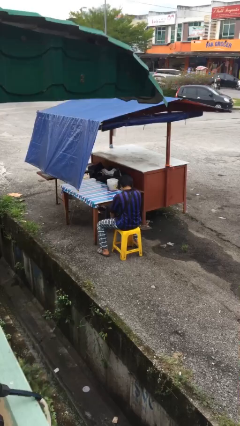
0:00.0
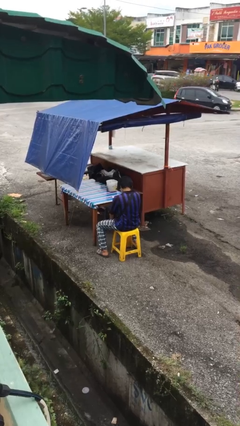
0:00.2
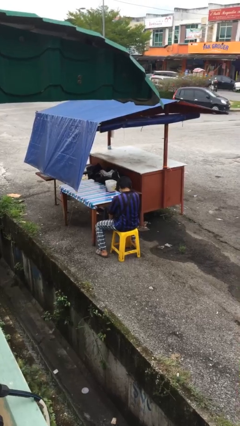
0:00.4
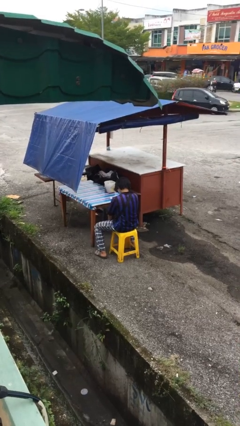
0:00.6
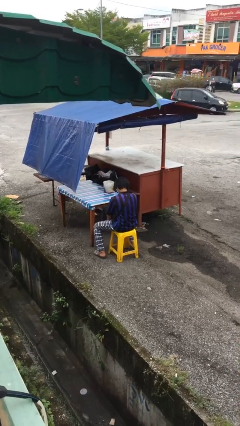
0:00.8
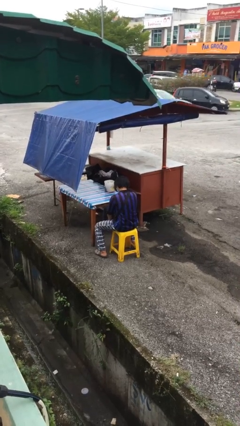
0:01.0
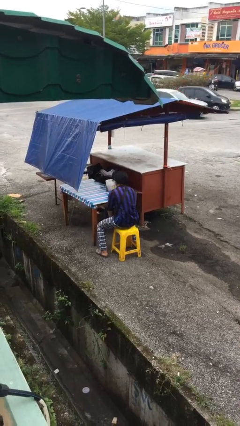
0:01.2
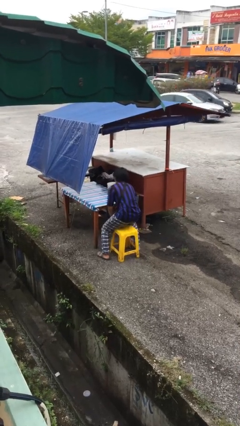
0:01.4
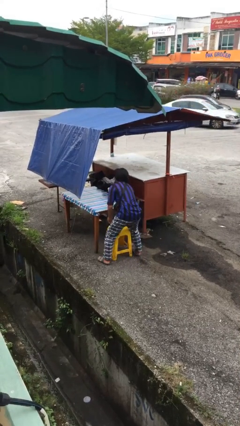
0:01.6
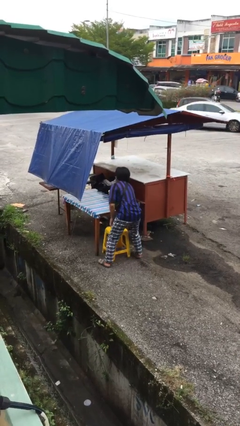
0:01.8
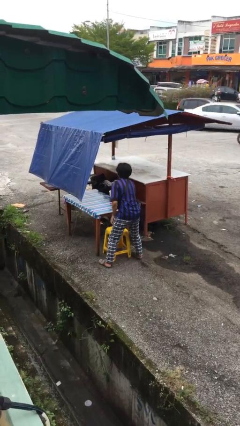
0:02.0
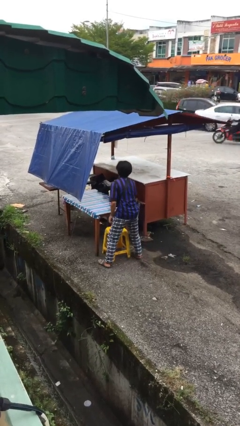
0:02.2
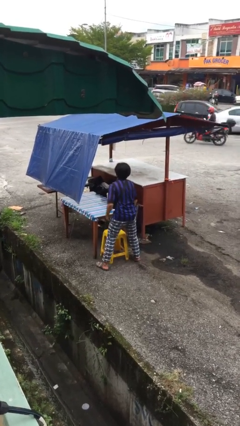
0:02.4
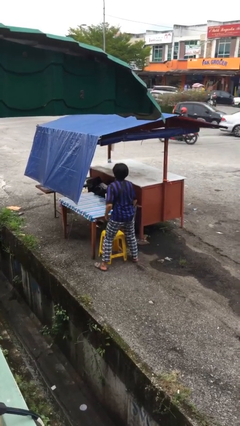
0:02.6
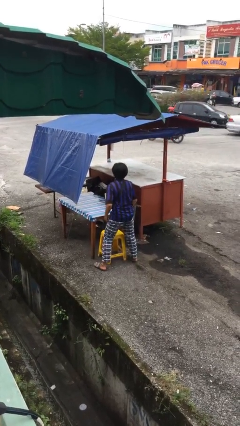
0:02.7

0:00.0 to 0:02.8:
person stands up

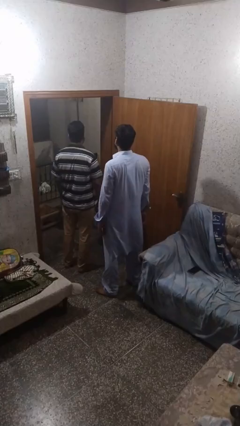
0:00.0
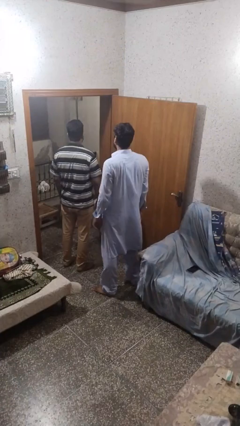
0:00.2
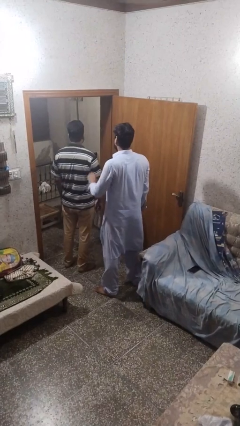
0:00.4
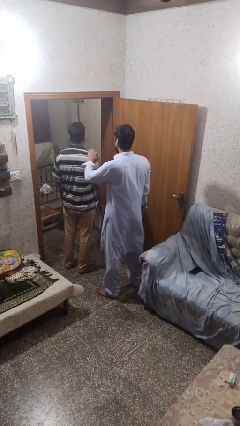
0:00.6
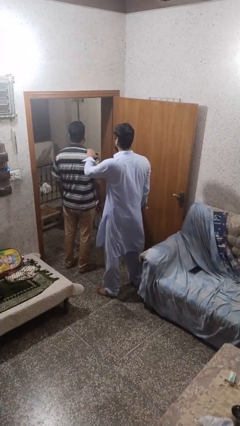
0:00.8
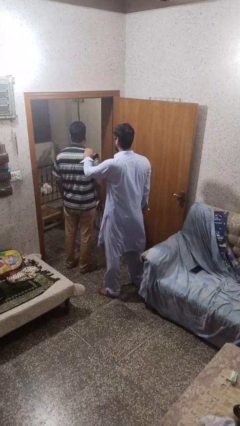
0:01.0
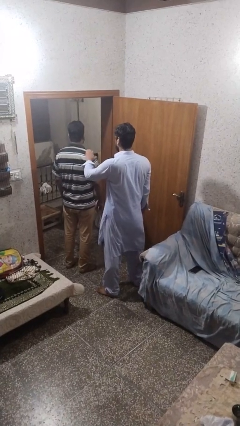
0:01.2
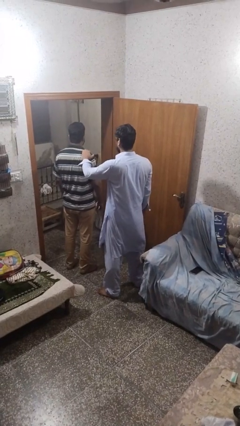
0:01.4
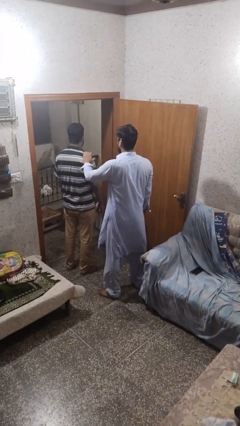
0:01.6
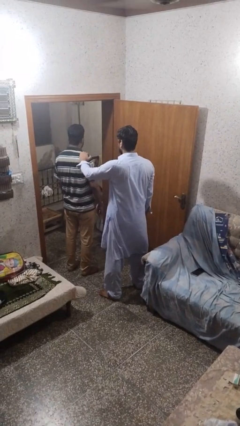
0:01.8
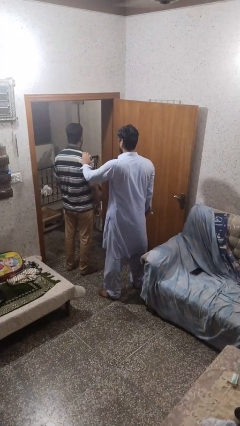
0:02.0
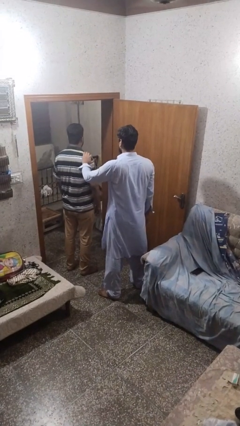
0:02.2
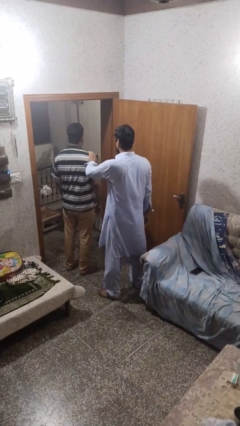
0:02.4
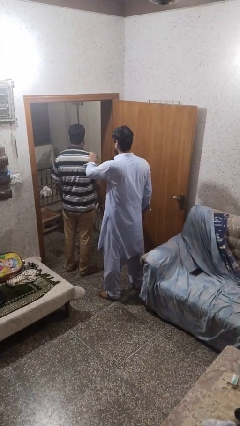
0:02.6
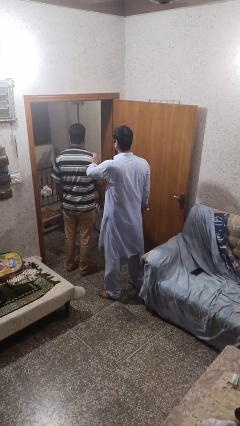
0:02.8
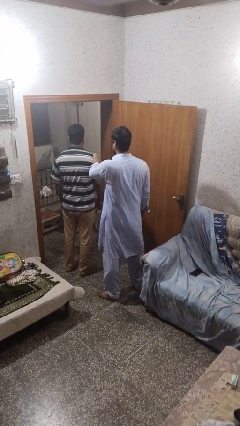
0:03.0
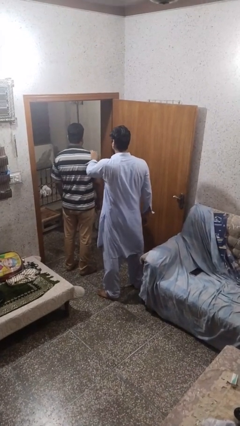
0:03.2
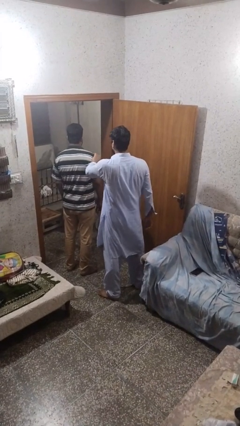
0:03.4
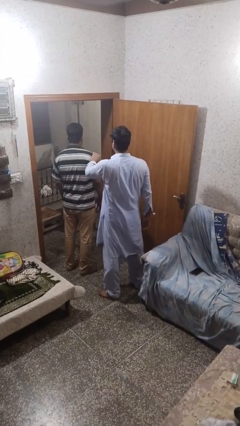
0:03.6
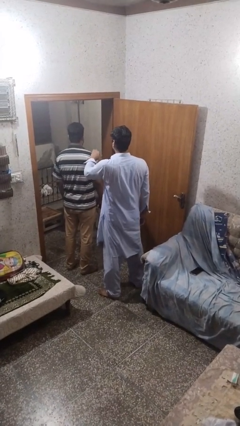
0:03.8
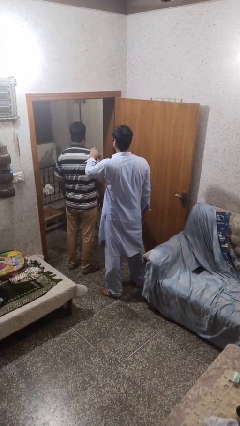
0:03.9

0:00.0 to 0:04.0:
person grabs person by shoulder

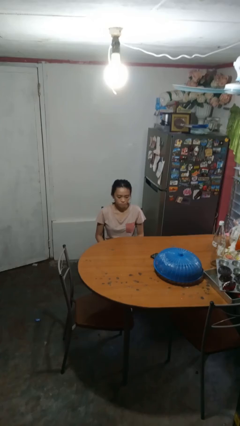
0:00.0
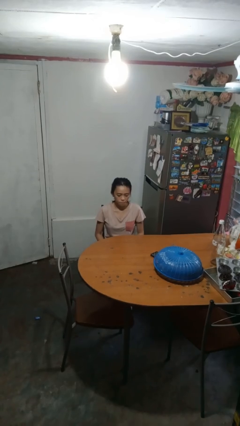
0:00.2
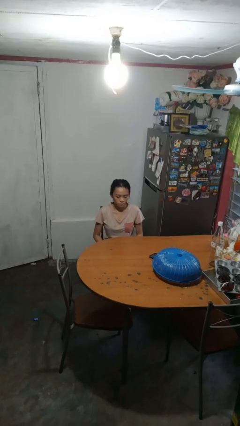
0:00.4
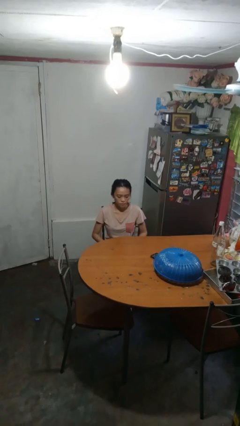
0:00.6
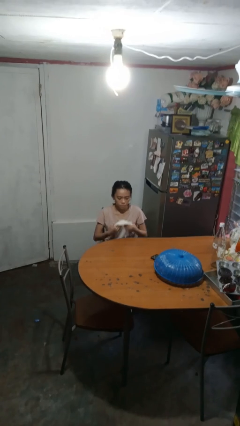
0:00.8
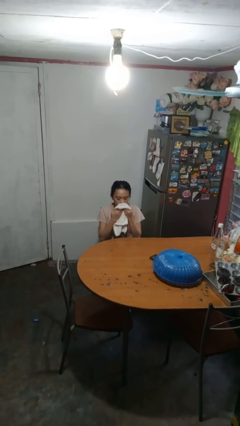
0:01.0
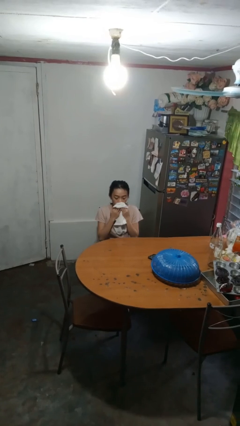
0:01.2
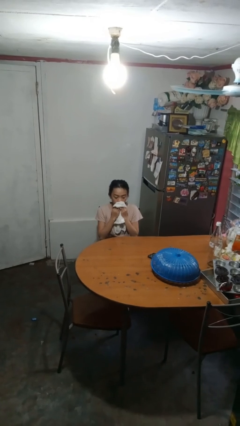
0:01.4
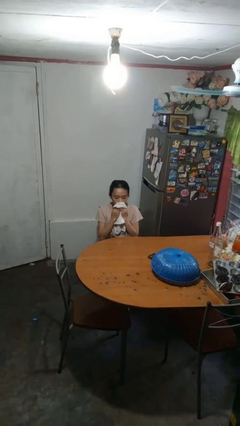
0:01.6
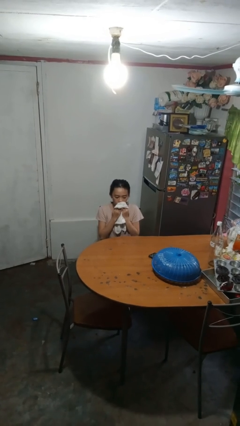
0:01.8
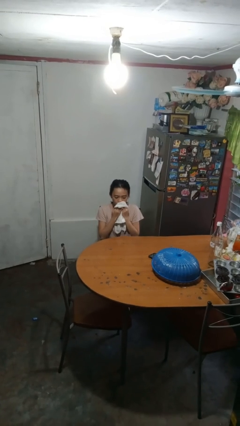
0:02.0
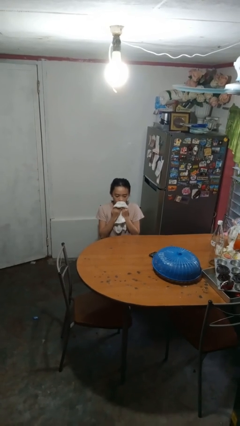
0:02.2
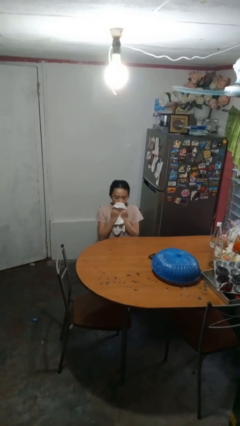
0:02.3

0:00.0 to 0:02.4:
person wipes mouth with napkin

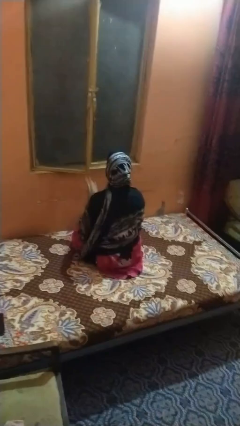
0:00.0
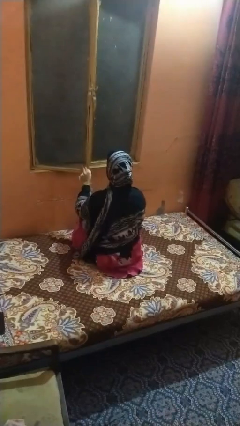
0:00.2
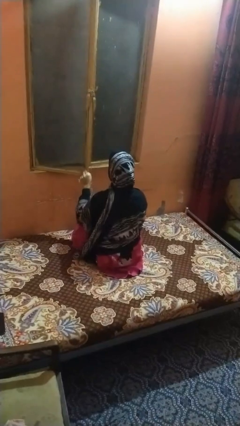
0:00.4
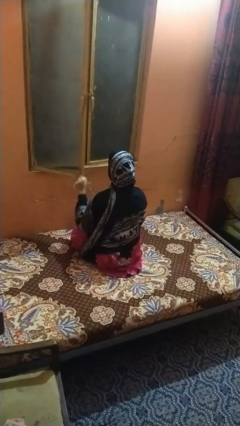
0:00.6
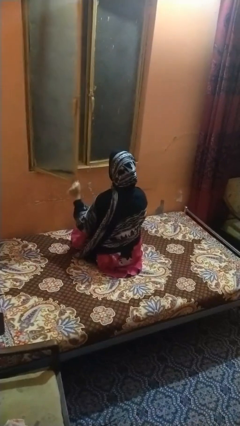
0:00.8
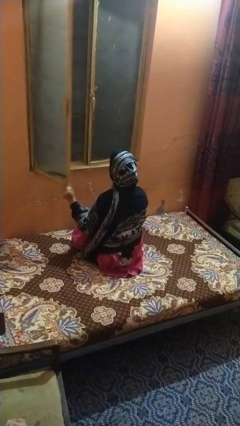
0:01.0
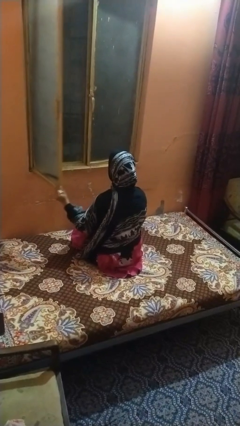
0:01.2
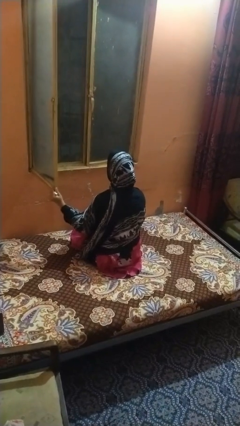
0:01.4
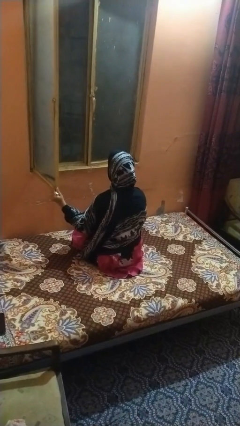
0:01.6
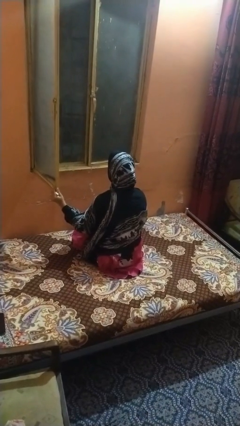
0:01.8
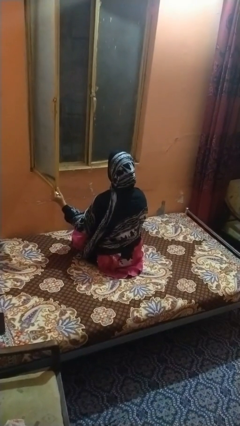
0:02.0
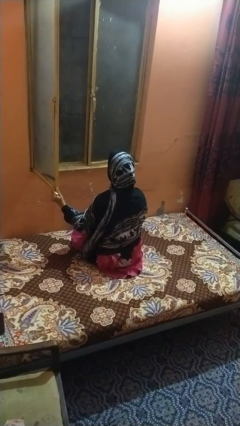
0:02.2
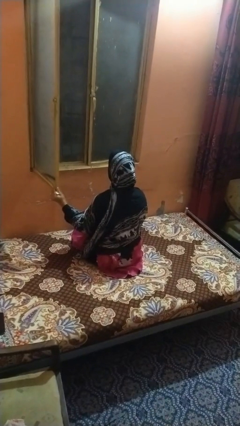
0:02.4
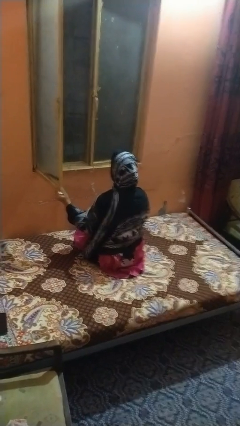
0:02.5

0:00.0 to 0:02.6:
person opens home window

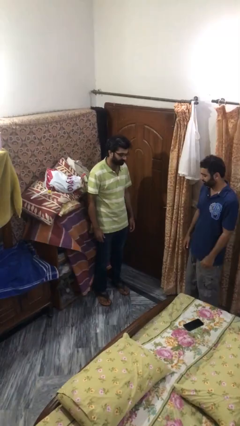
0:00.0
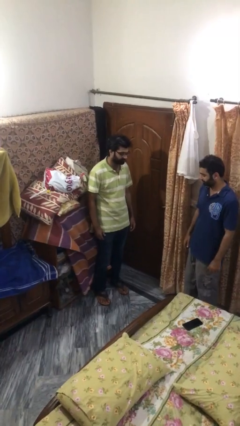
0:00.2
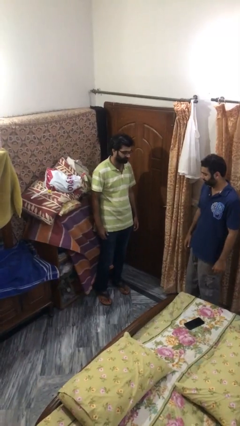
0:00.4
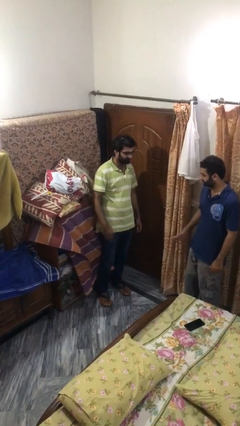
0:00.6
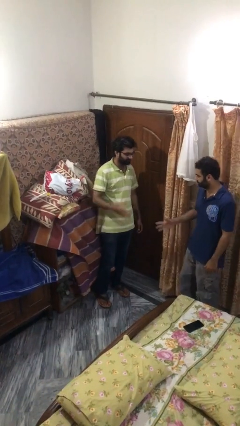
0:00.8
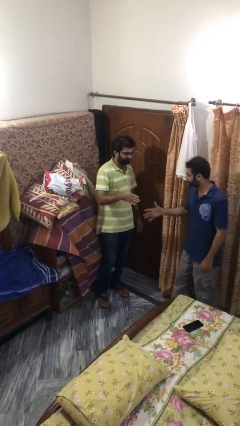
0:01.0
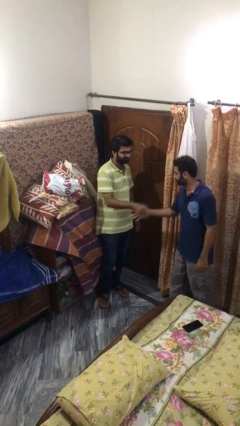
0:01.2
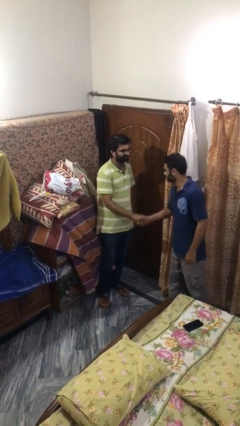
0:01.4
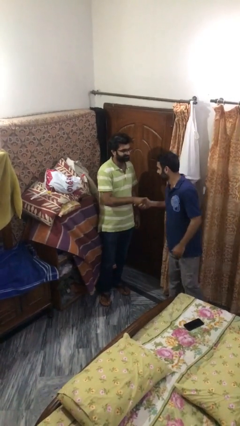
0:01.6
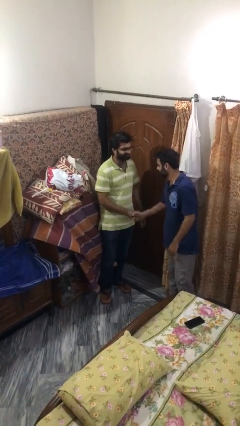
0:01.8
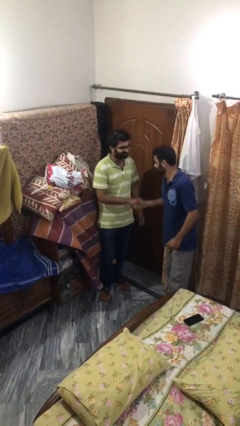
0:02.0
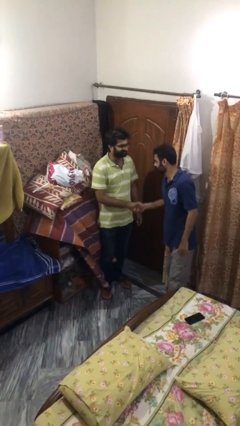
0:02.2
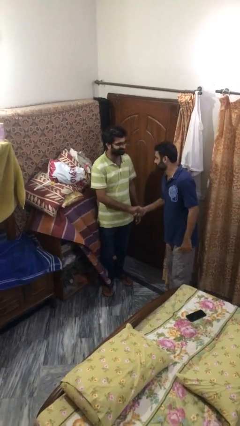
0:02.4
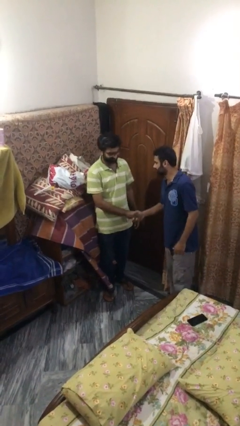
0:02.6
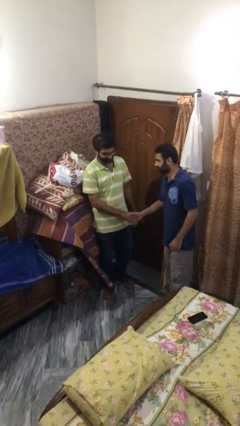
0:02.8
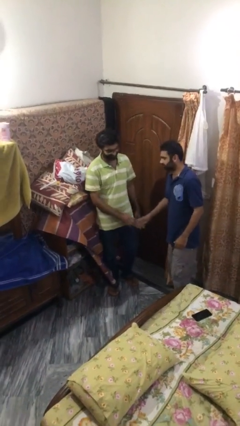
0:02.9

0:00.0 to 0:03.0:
person shakes hand

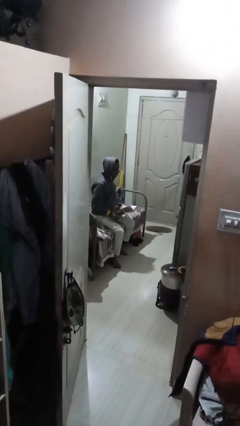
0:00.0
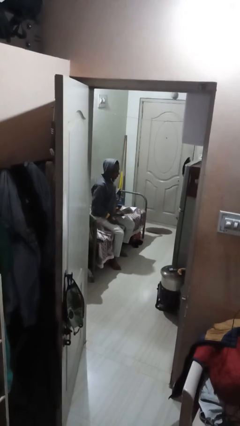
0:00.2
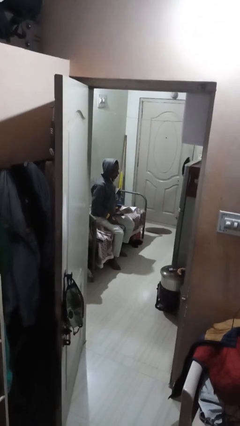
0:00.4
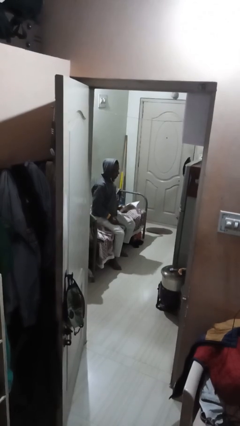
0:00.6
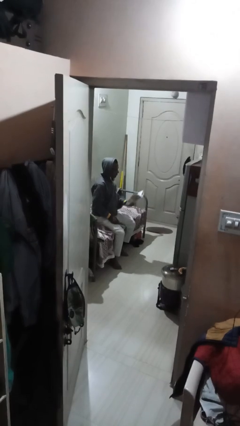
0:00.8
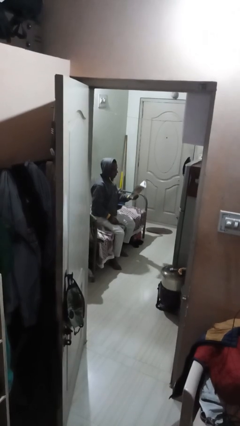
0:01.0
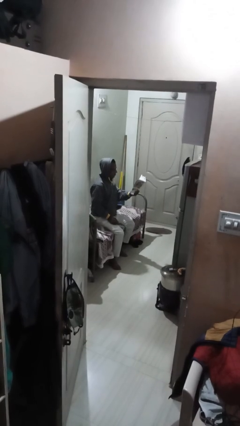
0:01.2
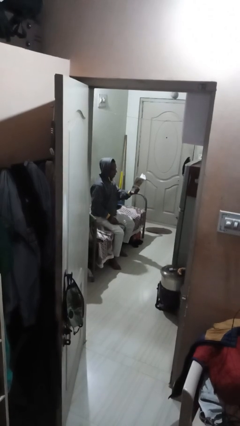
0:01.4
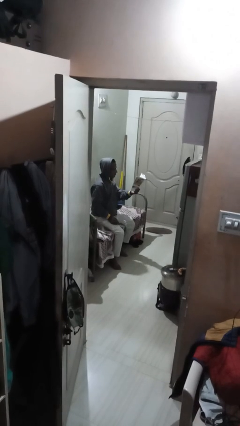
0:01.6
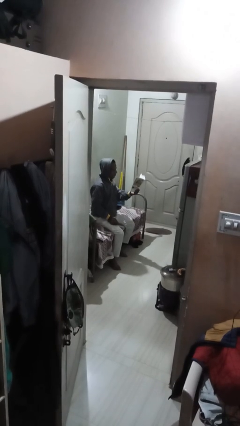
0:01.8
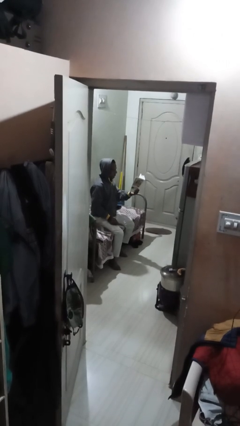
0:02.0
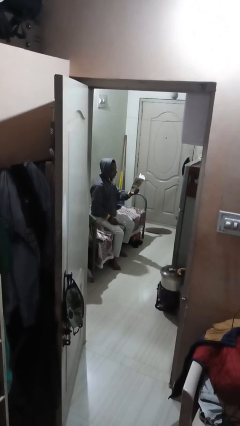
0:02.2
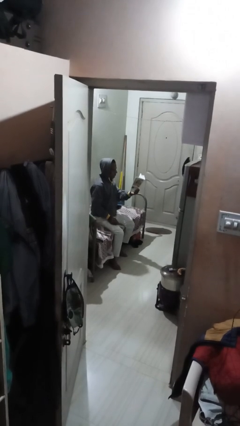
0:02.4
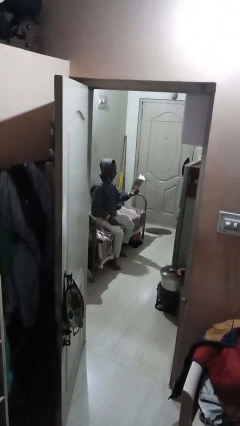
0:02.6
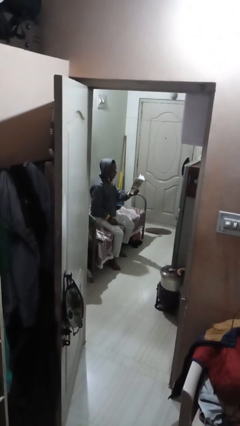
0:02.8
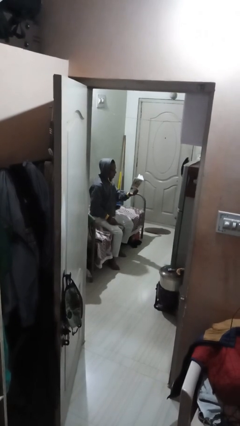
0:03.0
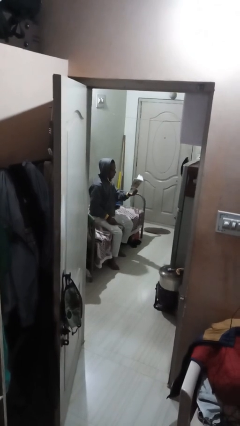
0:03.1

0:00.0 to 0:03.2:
person reads document
